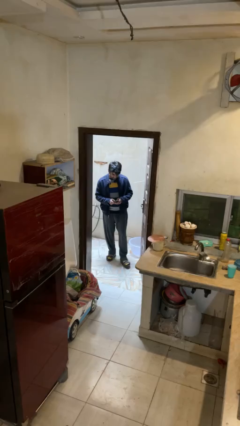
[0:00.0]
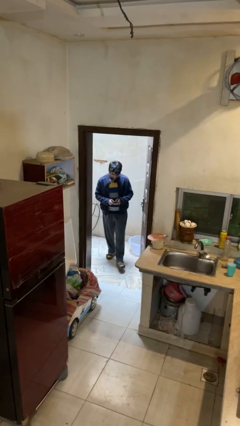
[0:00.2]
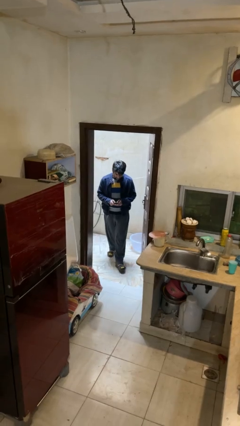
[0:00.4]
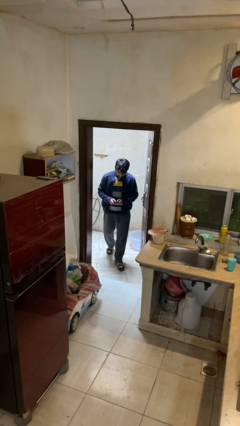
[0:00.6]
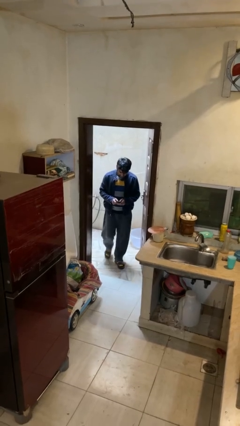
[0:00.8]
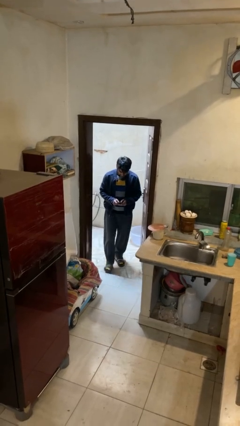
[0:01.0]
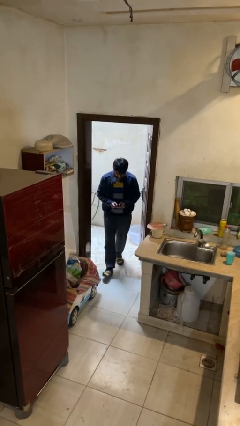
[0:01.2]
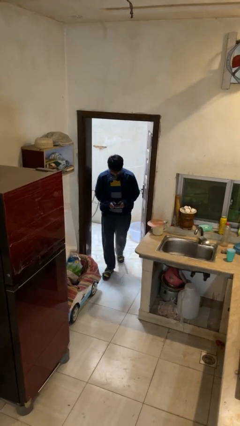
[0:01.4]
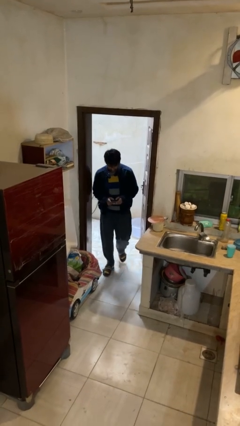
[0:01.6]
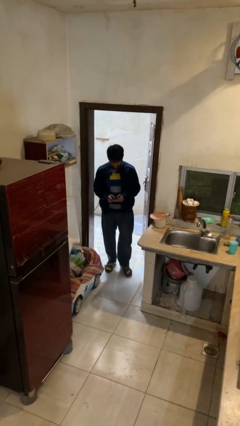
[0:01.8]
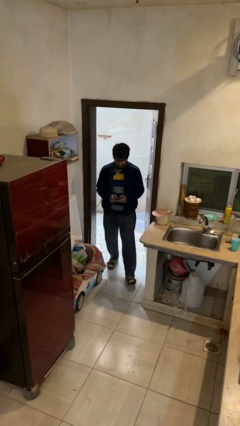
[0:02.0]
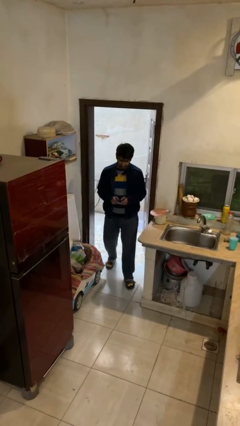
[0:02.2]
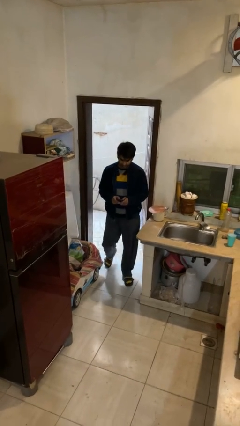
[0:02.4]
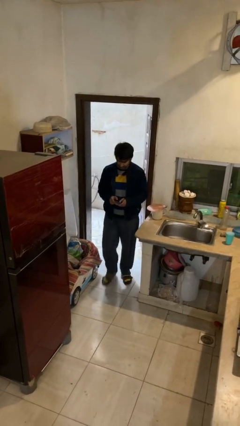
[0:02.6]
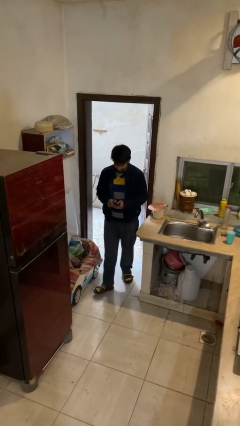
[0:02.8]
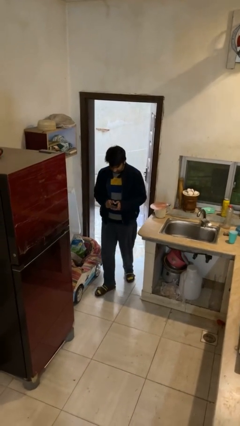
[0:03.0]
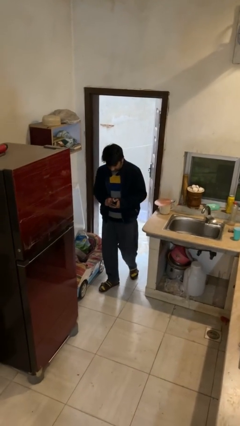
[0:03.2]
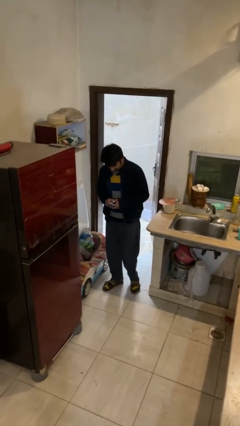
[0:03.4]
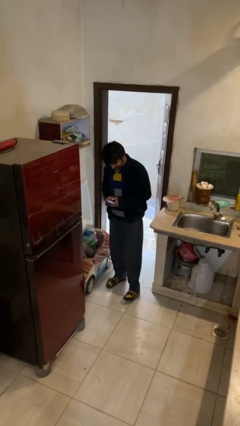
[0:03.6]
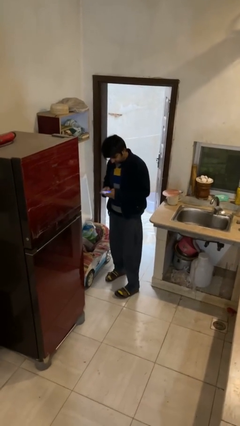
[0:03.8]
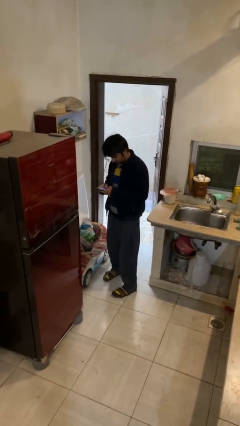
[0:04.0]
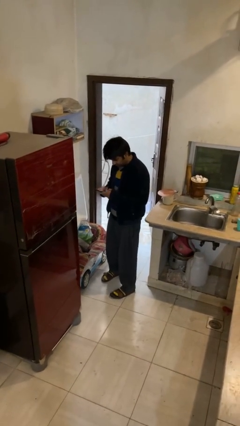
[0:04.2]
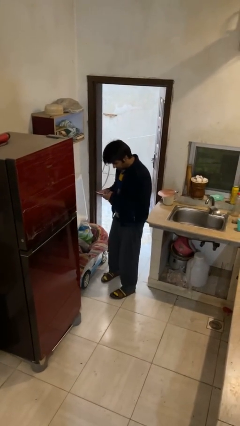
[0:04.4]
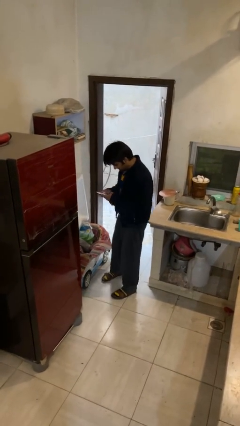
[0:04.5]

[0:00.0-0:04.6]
person enters scene through structure

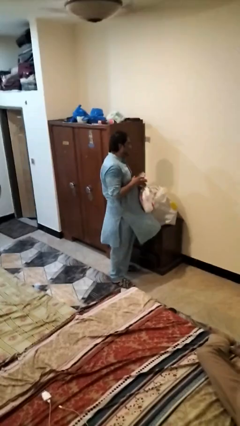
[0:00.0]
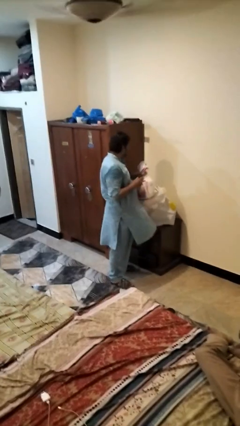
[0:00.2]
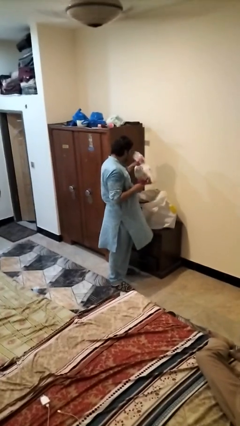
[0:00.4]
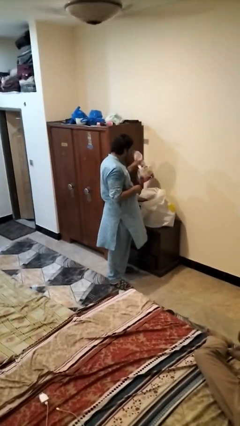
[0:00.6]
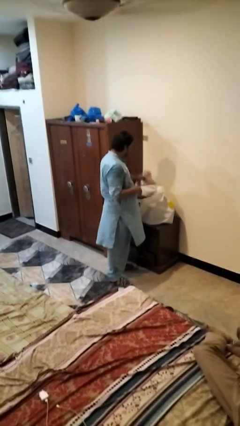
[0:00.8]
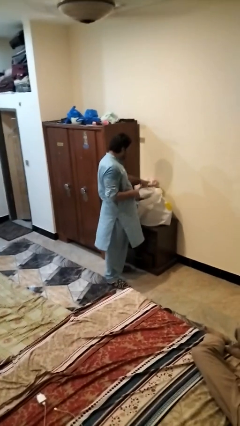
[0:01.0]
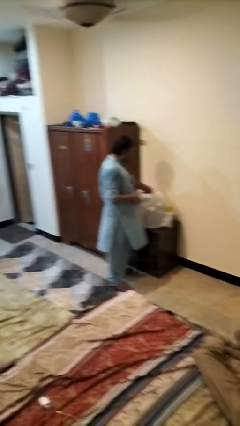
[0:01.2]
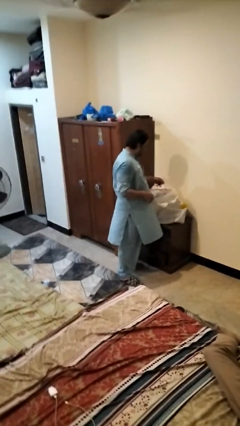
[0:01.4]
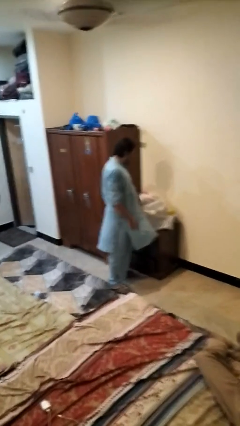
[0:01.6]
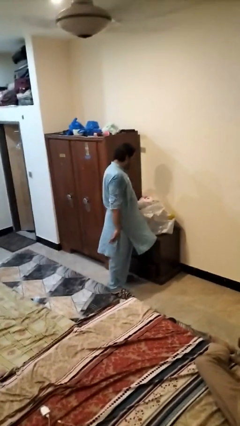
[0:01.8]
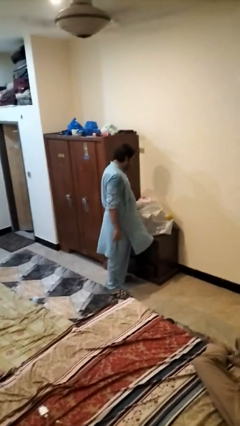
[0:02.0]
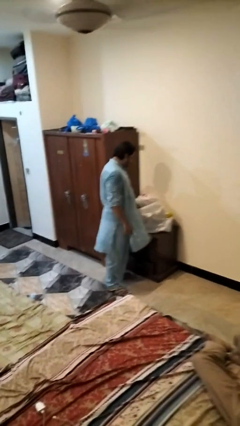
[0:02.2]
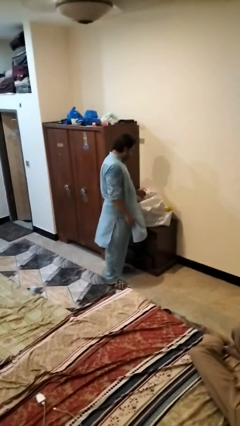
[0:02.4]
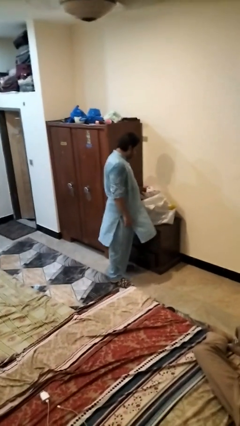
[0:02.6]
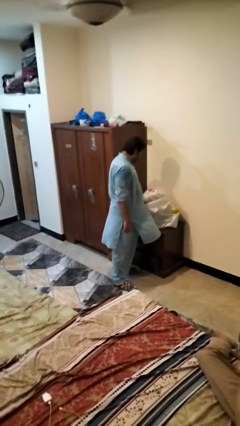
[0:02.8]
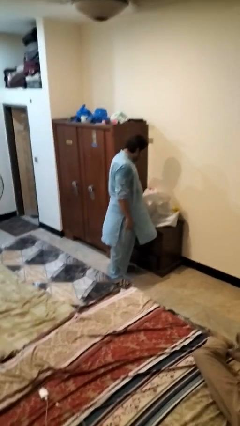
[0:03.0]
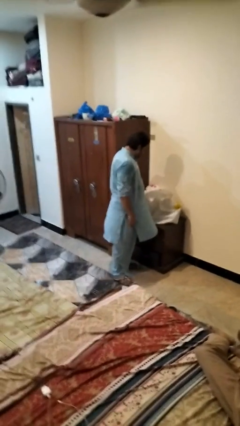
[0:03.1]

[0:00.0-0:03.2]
person puts object into bag

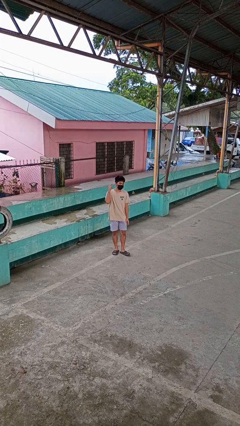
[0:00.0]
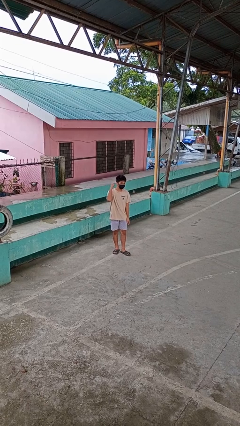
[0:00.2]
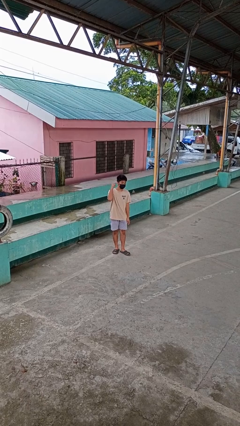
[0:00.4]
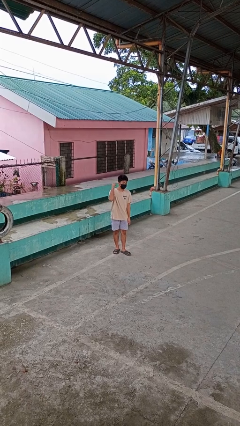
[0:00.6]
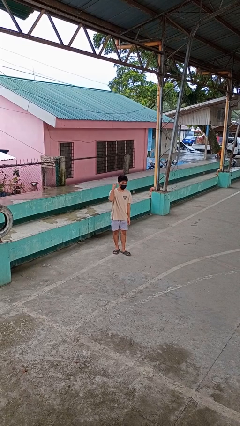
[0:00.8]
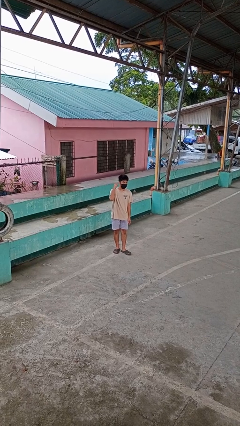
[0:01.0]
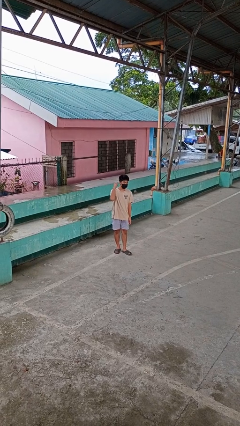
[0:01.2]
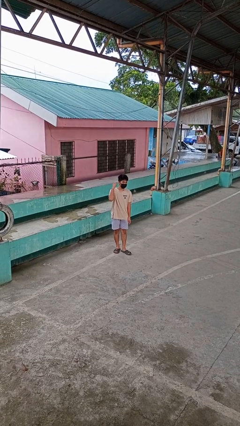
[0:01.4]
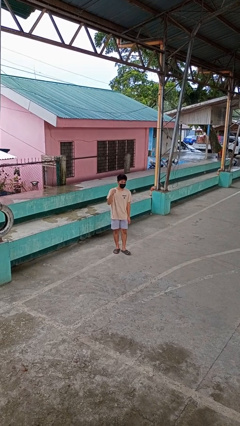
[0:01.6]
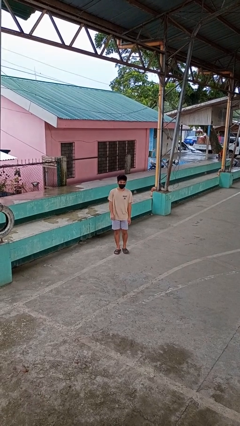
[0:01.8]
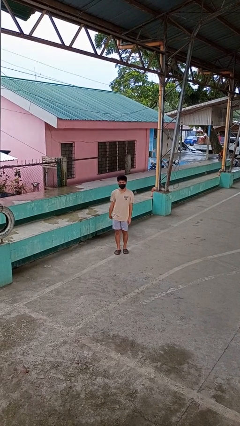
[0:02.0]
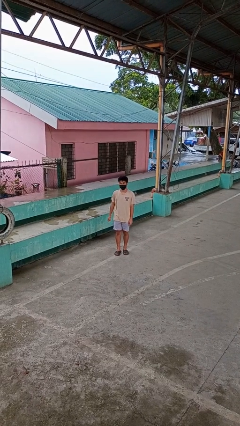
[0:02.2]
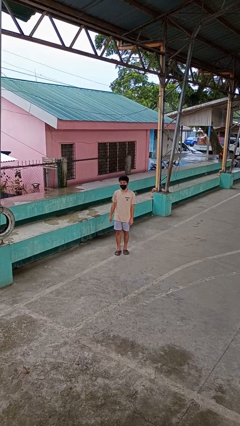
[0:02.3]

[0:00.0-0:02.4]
person gestures listen closely

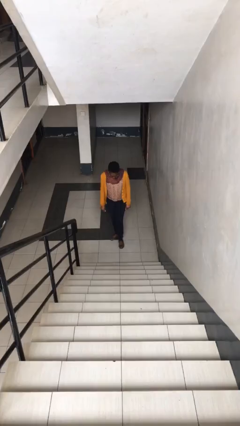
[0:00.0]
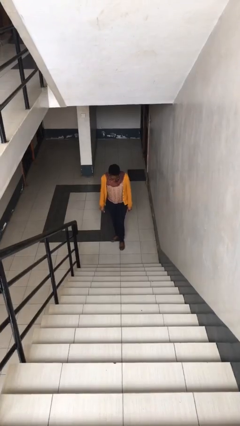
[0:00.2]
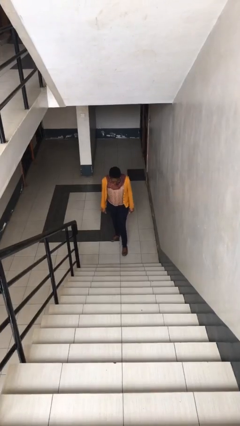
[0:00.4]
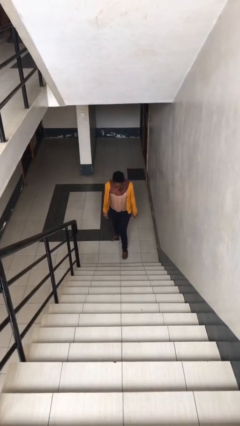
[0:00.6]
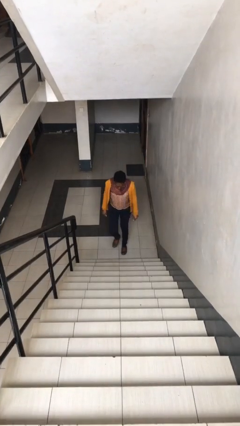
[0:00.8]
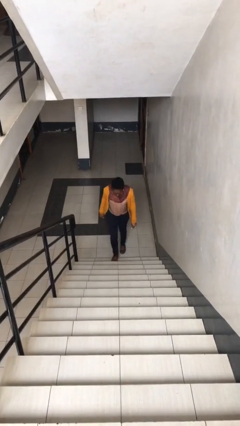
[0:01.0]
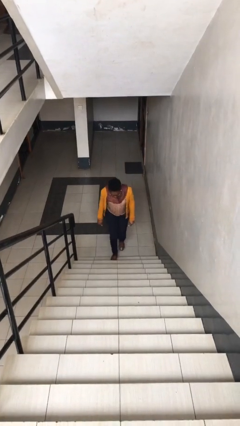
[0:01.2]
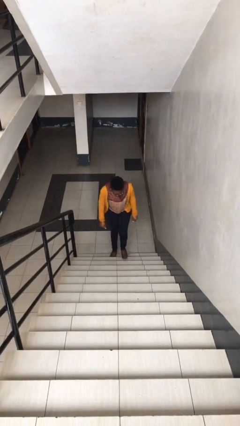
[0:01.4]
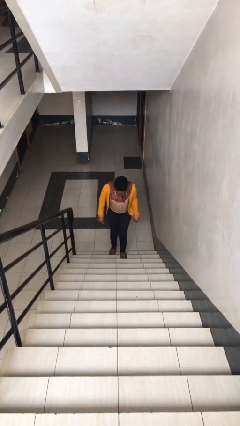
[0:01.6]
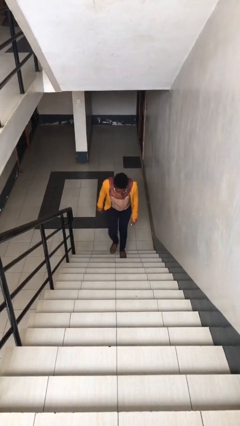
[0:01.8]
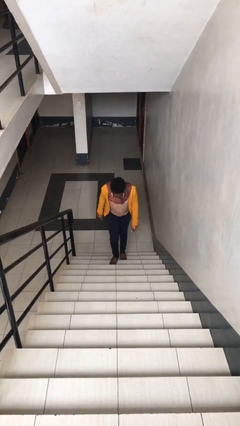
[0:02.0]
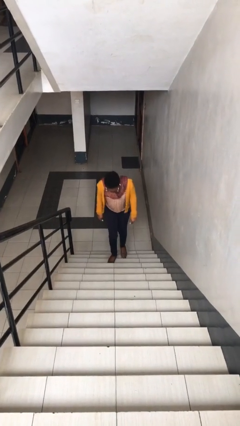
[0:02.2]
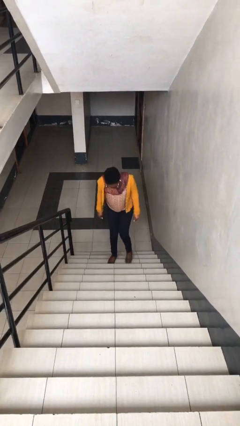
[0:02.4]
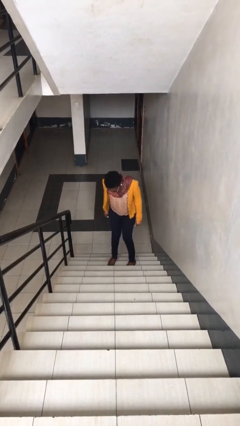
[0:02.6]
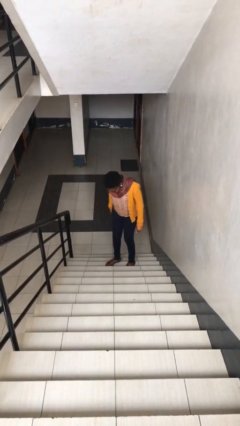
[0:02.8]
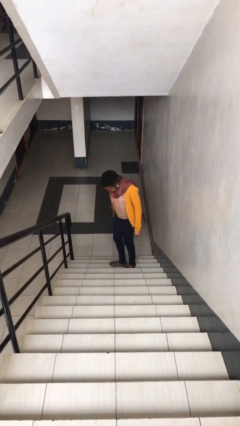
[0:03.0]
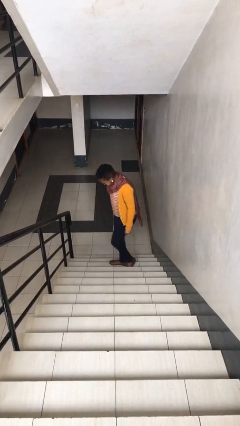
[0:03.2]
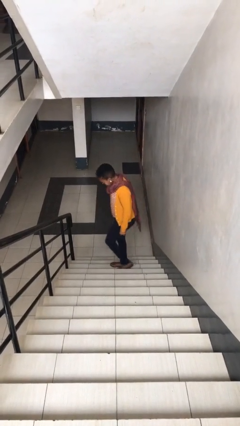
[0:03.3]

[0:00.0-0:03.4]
person climbs up stairs

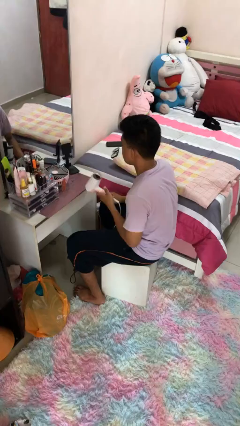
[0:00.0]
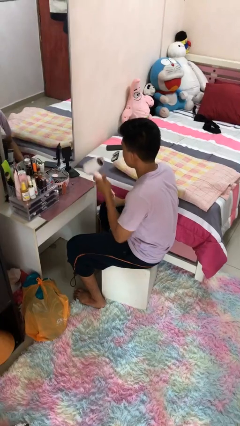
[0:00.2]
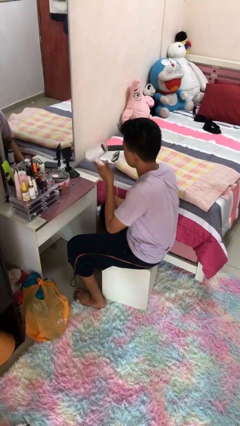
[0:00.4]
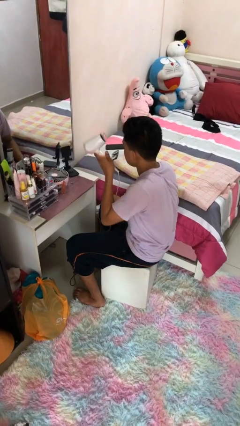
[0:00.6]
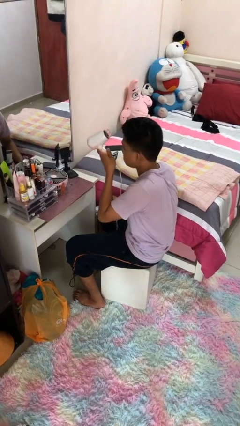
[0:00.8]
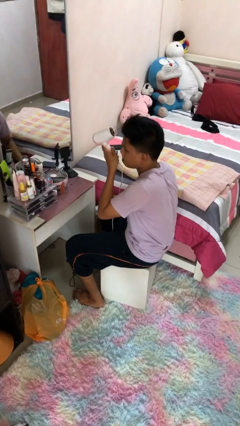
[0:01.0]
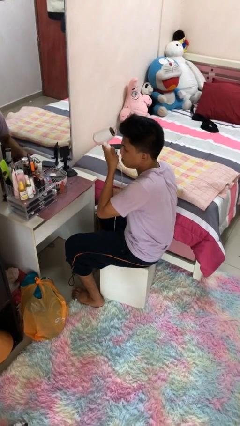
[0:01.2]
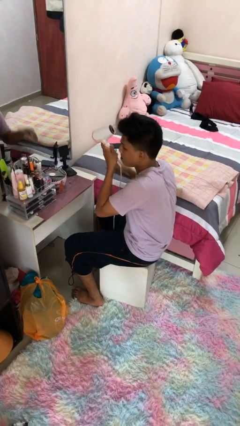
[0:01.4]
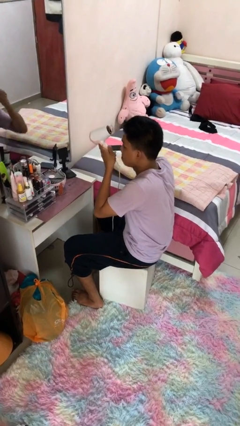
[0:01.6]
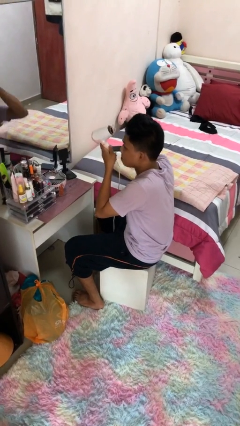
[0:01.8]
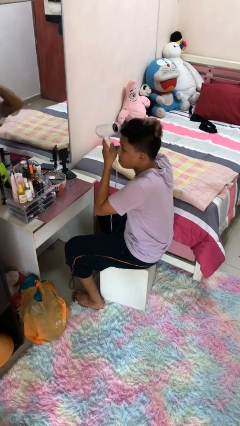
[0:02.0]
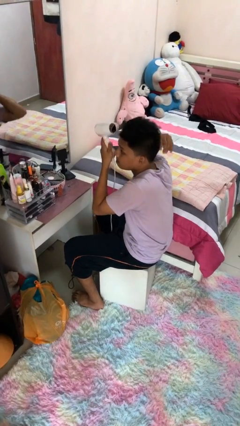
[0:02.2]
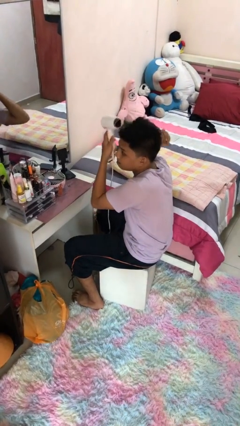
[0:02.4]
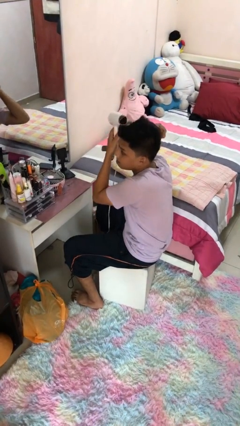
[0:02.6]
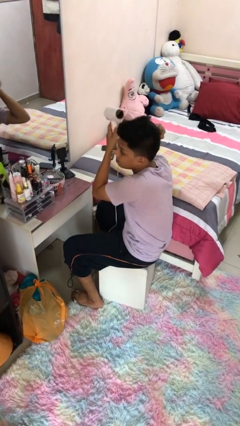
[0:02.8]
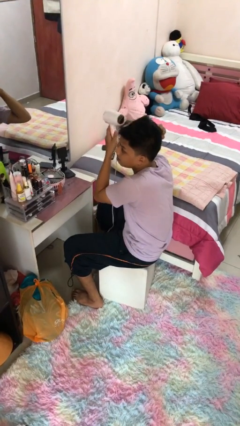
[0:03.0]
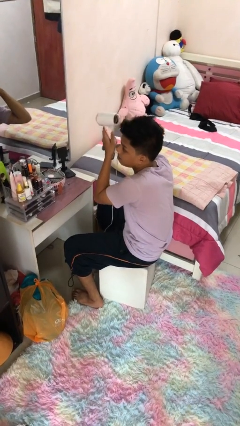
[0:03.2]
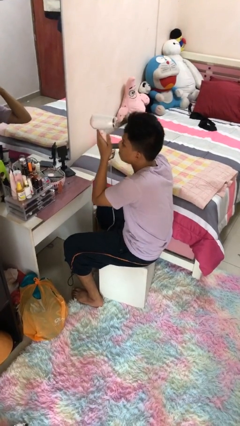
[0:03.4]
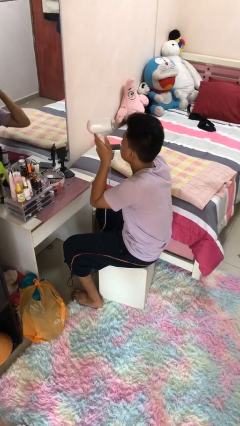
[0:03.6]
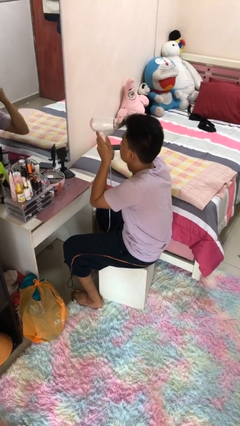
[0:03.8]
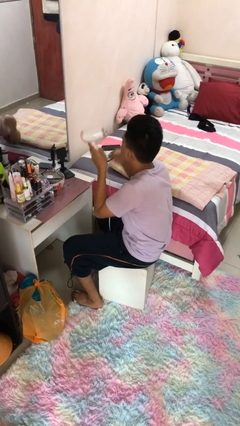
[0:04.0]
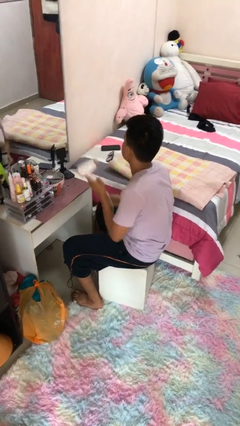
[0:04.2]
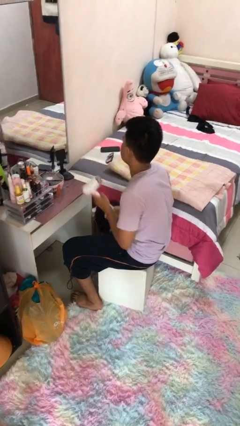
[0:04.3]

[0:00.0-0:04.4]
person dries hair with hairdryer
